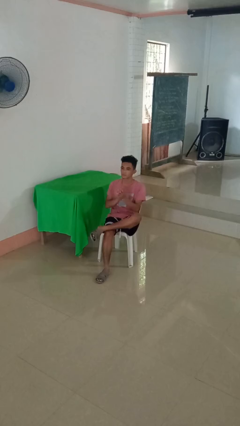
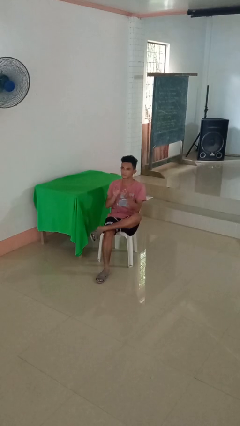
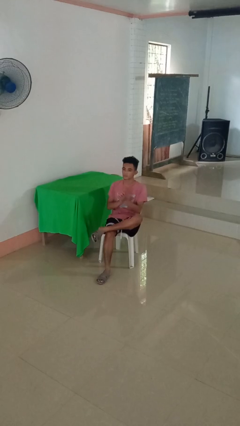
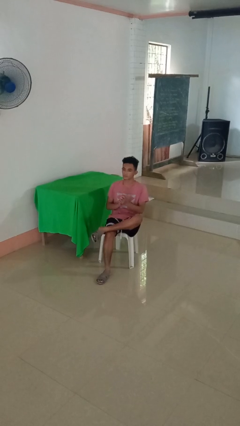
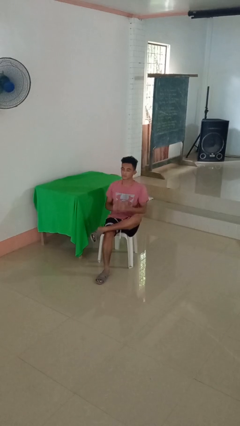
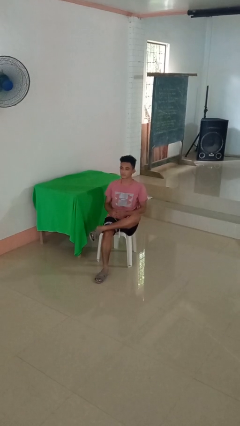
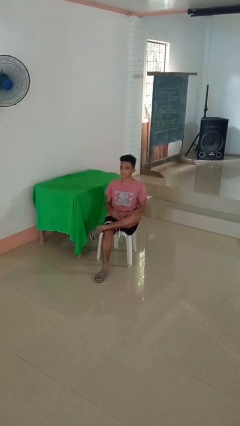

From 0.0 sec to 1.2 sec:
person claps hands

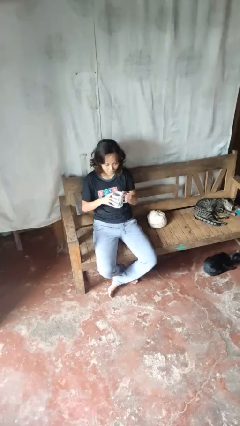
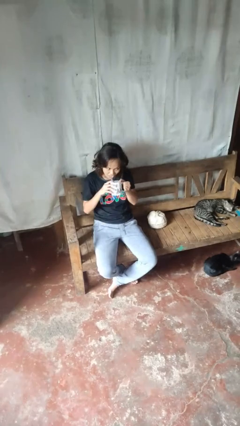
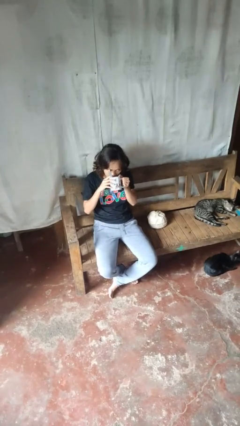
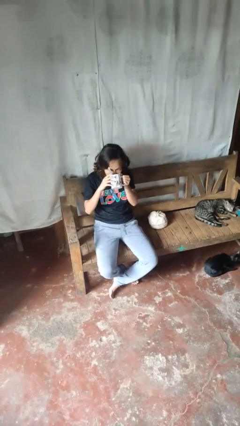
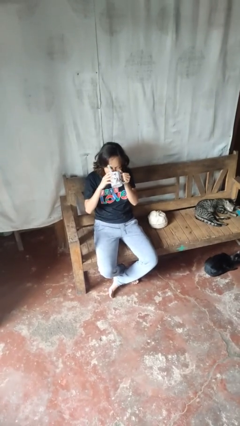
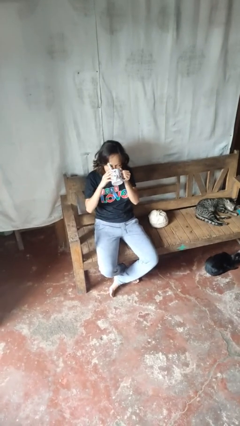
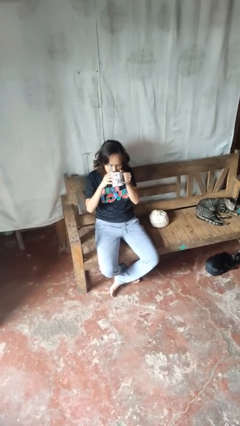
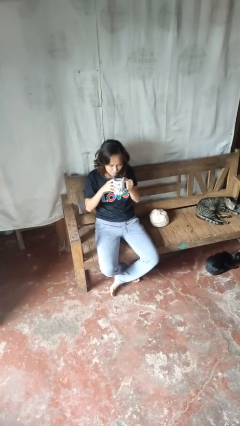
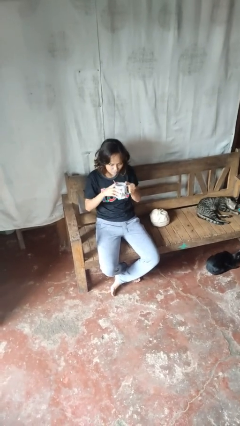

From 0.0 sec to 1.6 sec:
person drinks from mug

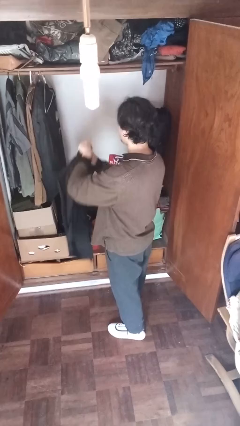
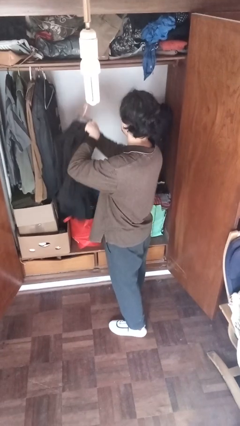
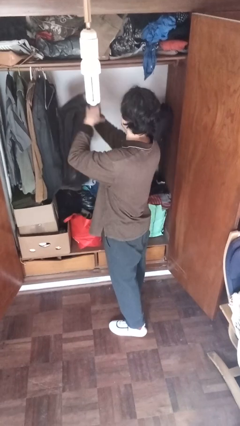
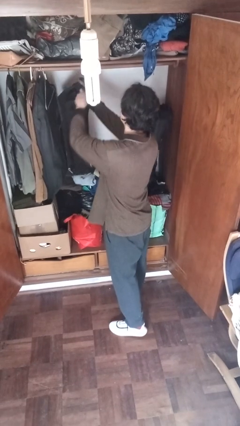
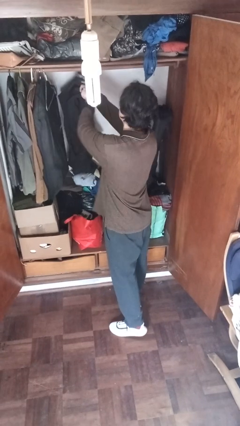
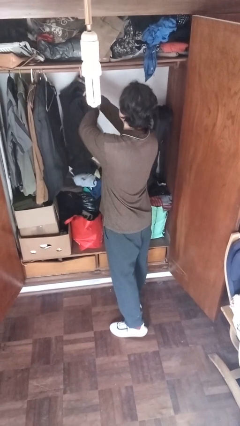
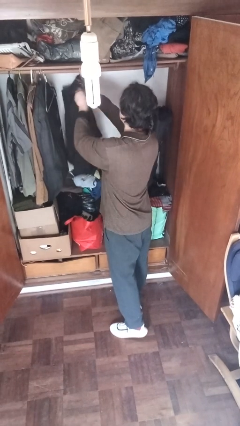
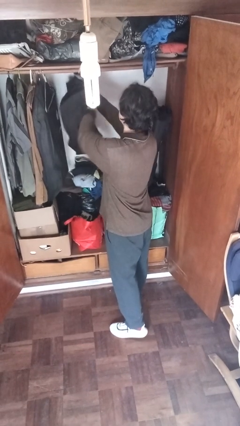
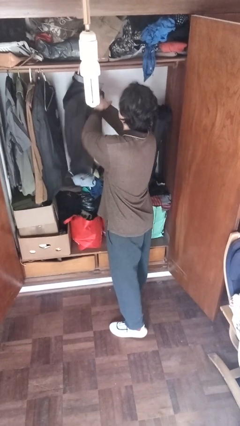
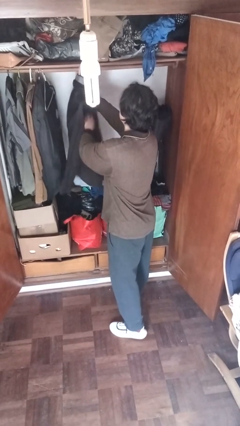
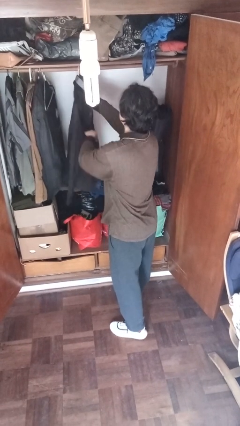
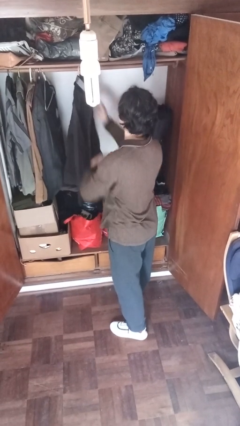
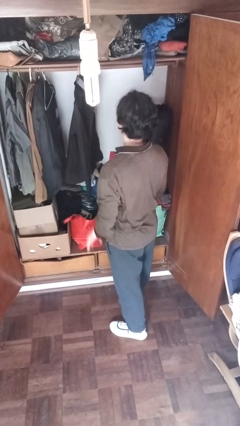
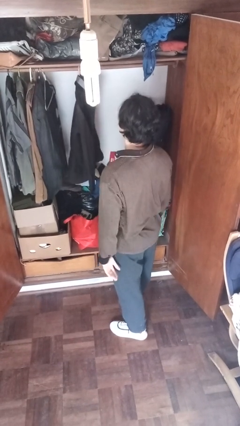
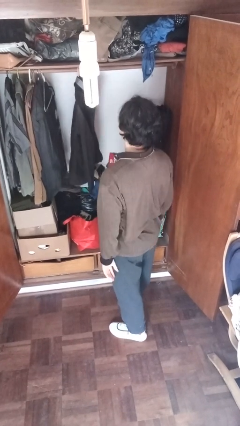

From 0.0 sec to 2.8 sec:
person puts clothes into closet

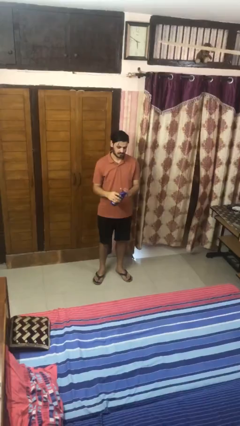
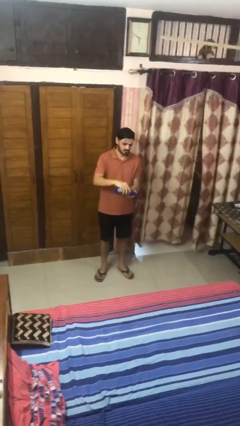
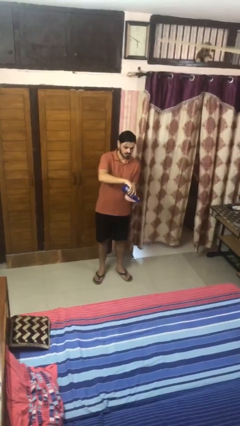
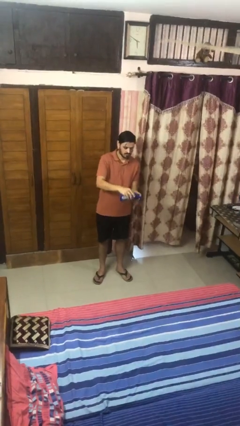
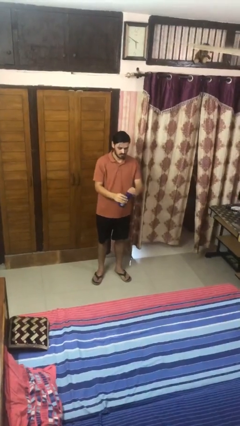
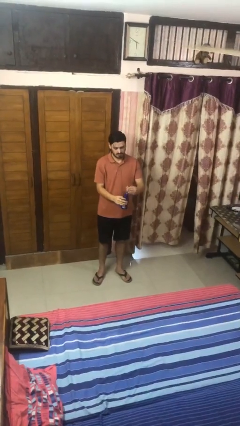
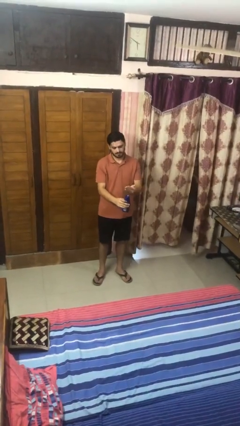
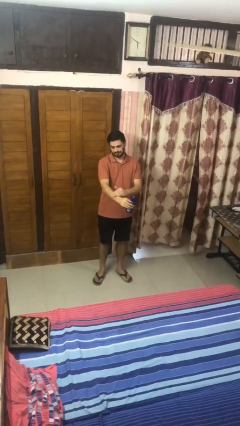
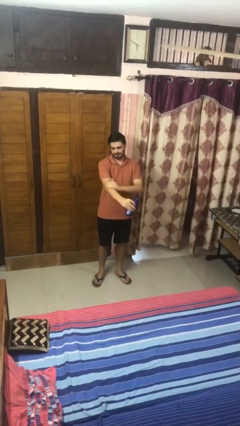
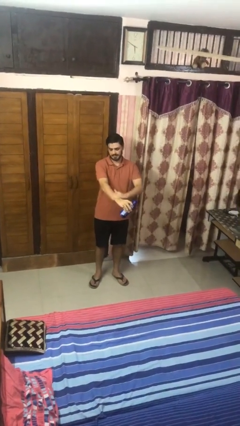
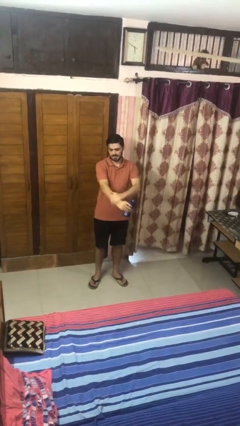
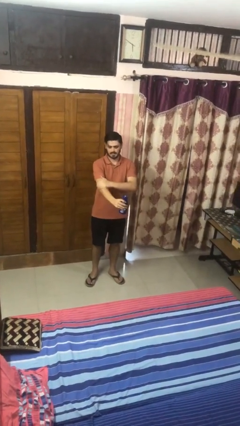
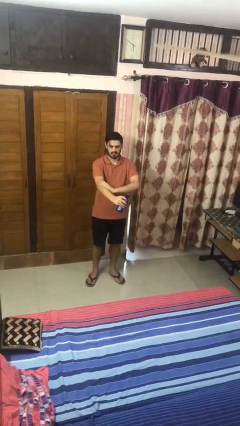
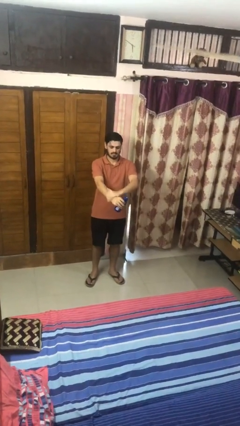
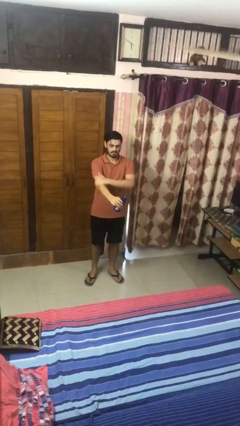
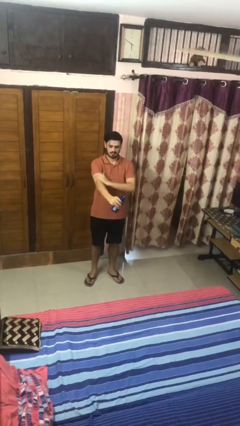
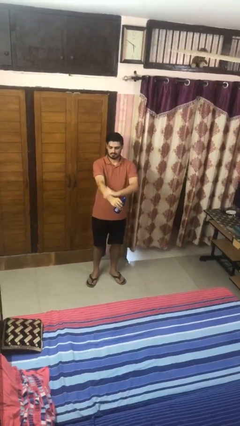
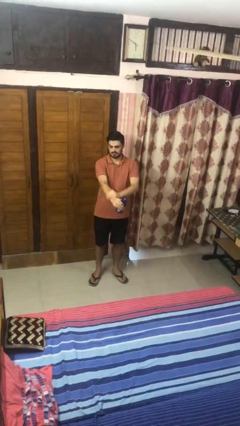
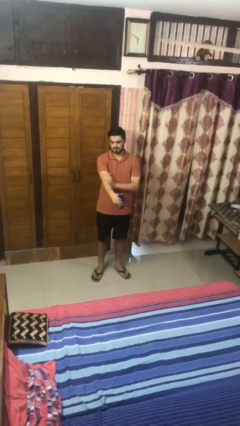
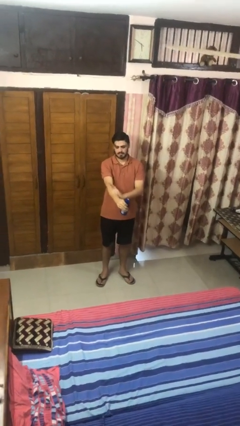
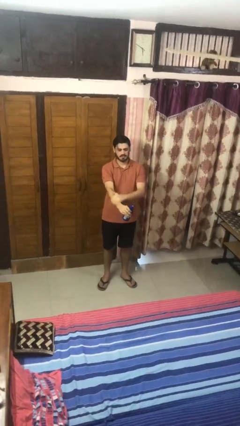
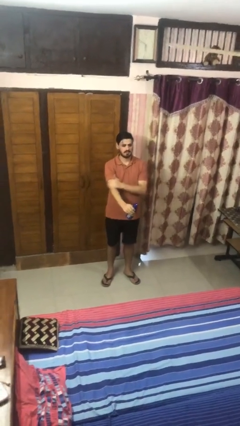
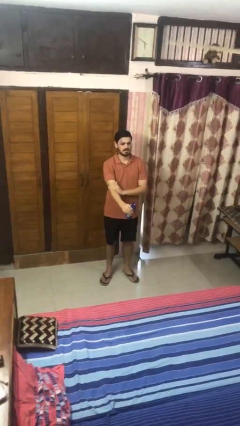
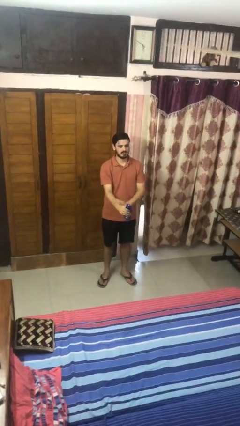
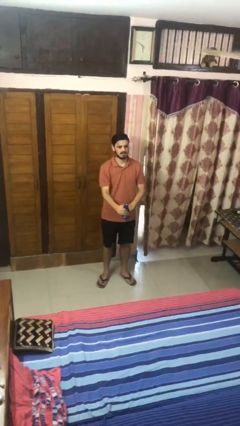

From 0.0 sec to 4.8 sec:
person applies sunscreen

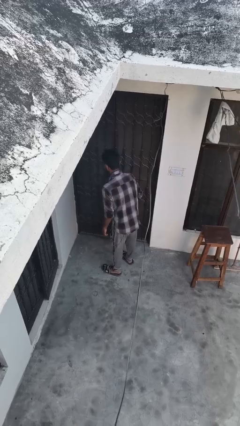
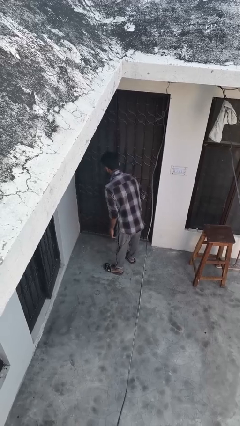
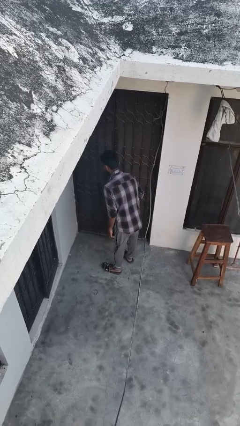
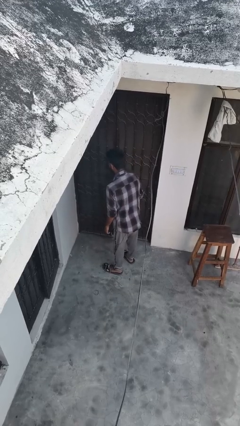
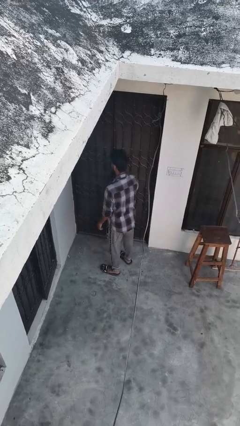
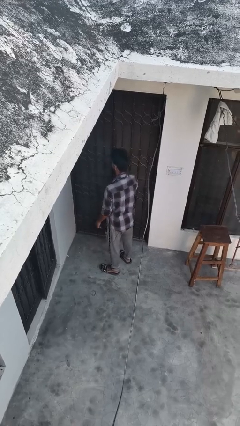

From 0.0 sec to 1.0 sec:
person bows

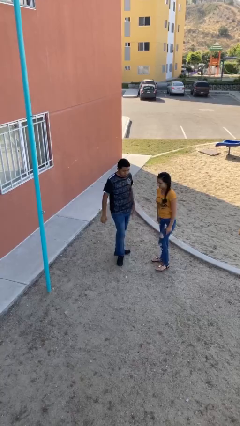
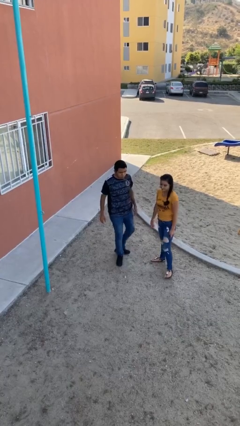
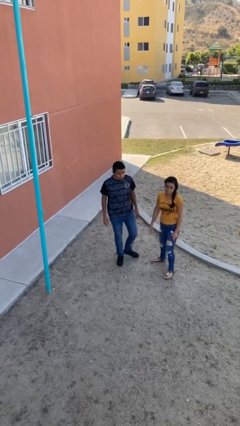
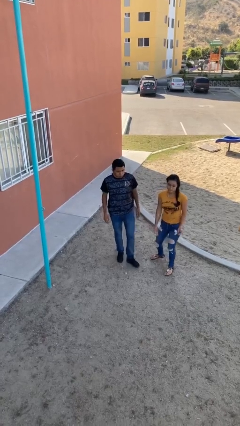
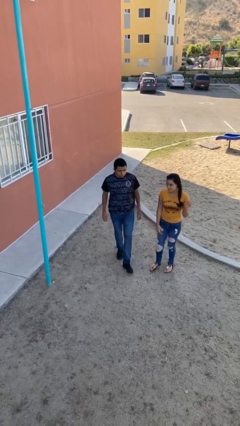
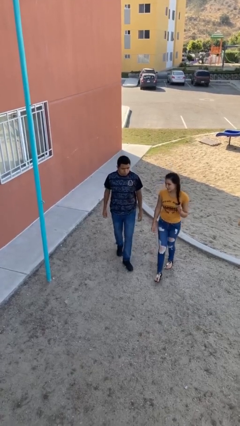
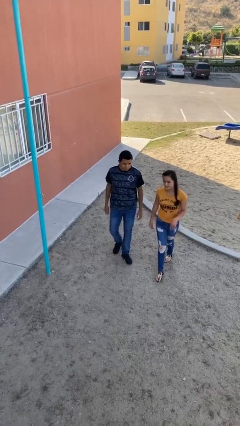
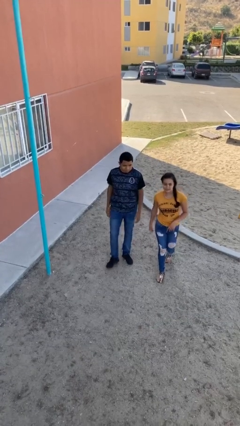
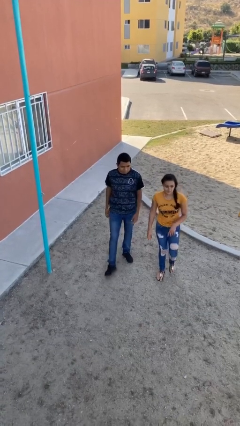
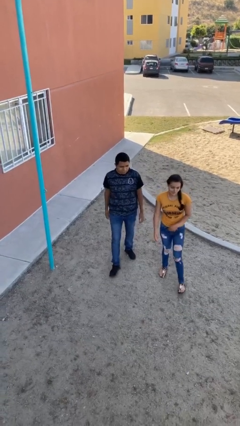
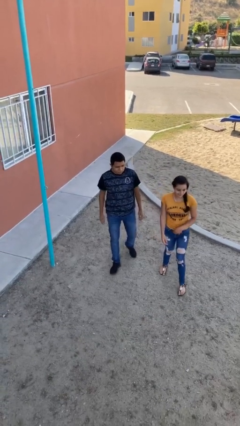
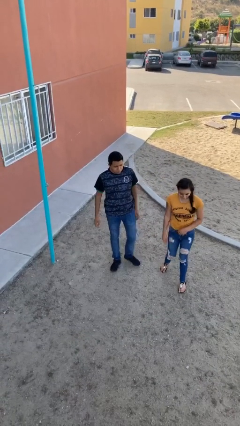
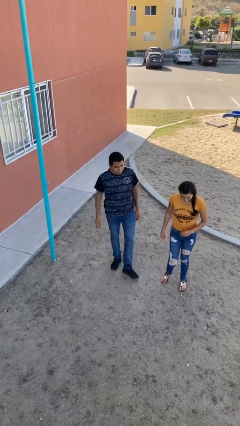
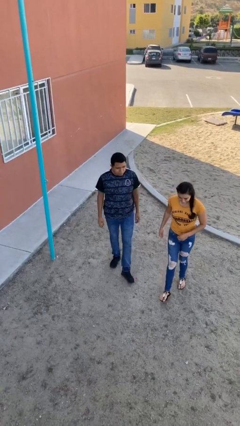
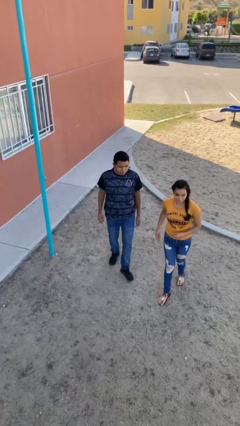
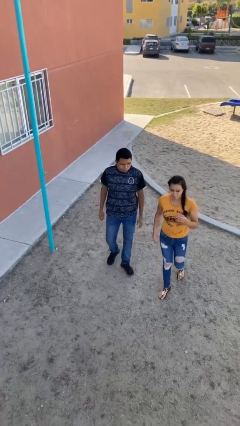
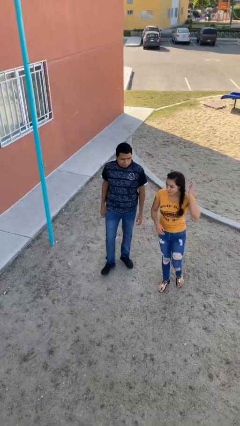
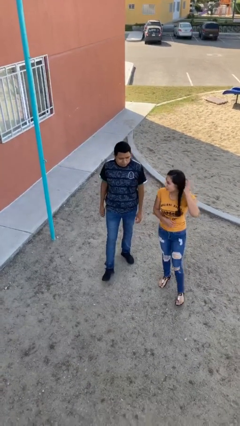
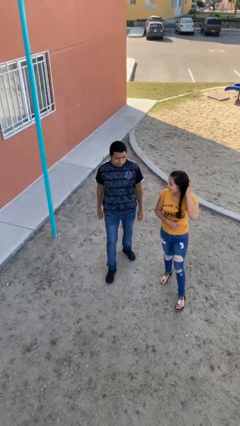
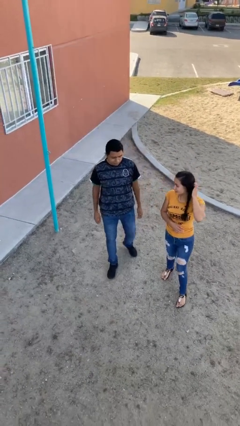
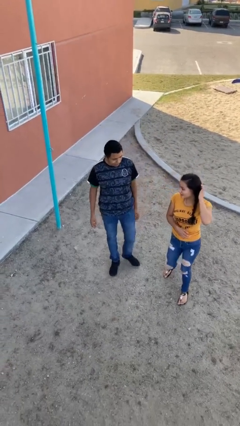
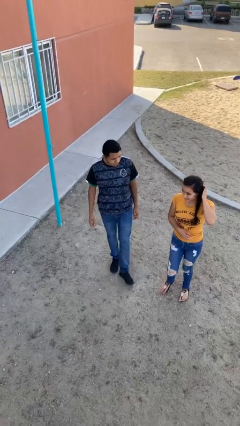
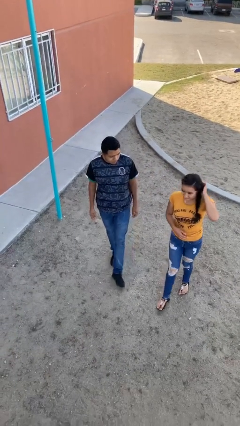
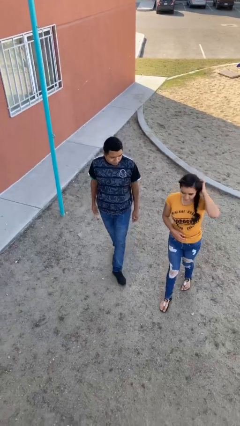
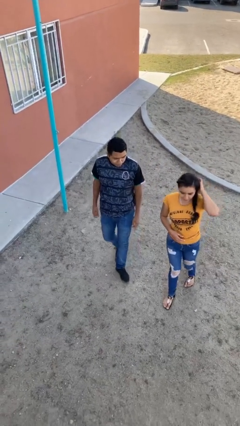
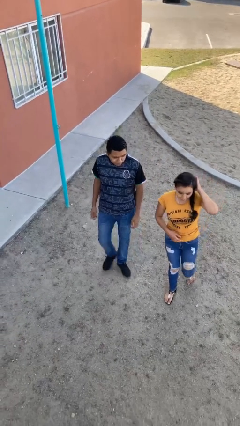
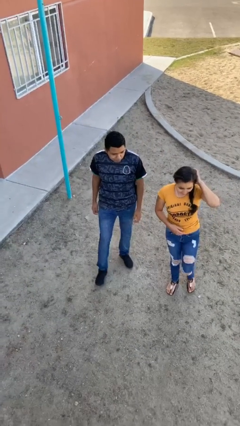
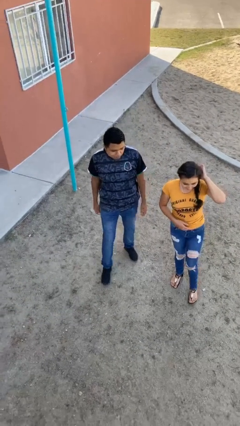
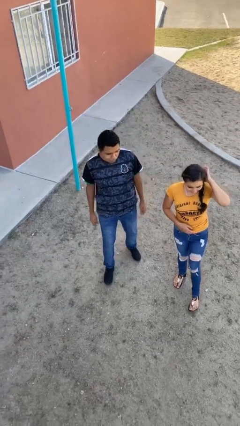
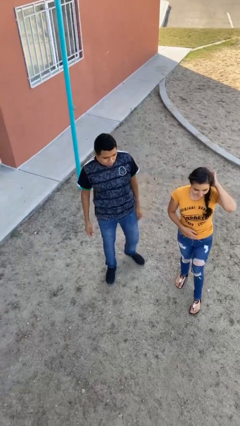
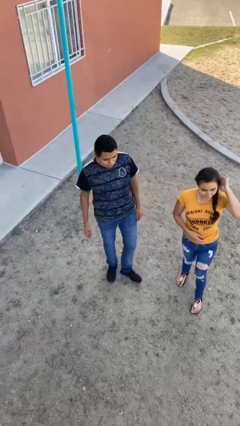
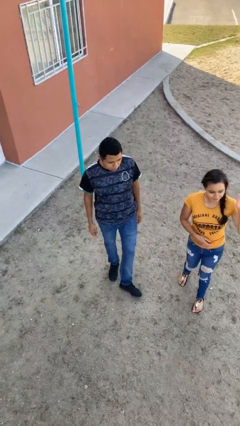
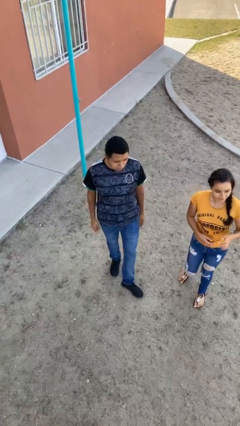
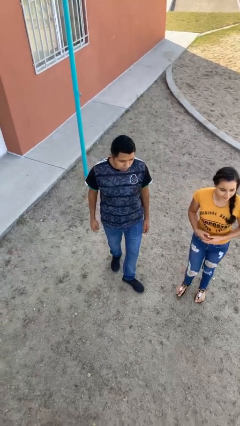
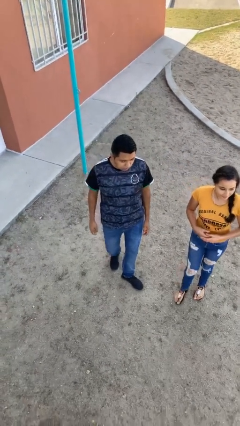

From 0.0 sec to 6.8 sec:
person talks to person
